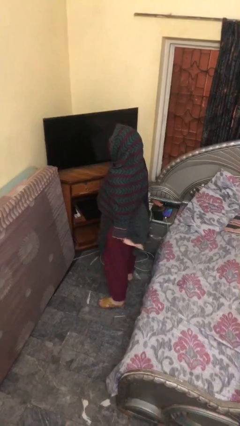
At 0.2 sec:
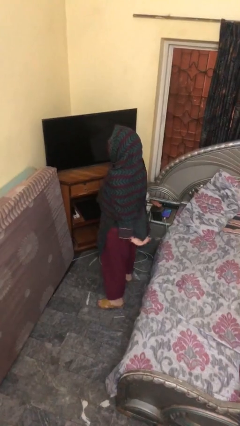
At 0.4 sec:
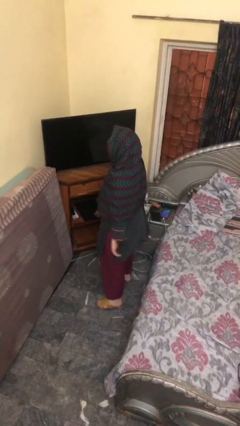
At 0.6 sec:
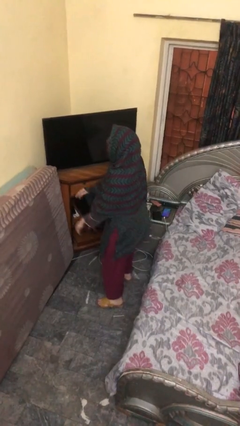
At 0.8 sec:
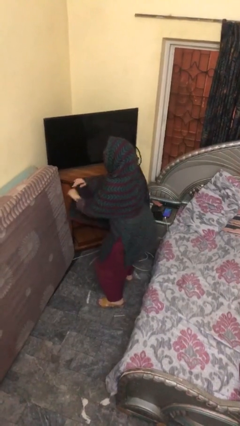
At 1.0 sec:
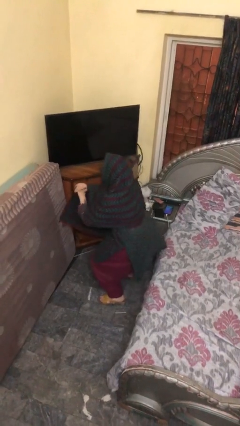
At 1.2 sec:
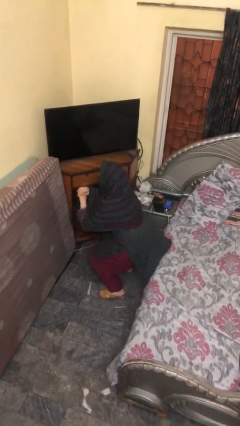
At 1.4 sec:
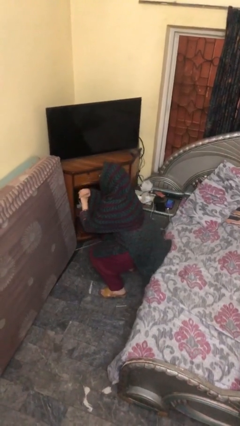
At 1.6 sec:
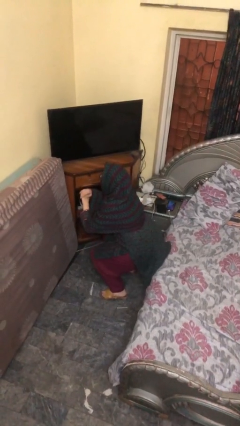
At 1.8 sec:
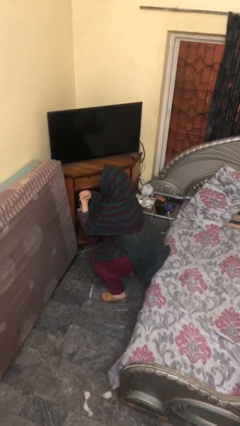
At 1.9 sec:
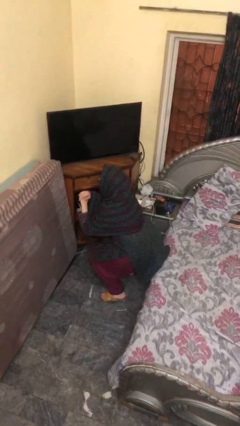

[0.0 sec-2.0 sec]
person squats

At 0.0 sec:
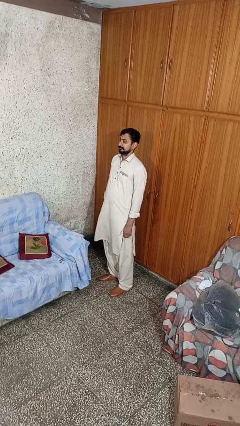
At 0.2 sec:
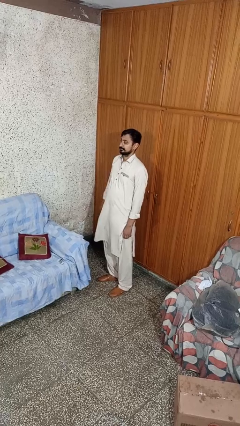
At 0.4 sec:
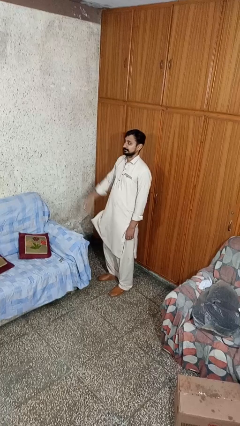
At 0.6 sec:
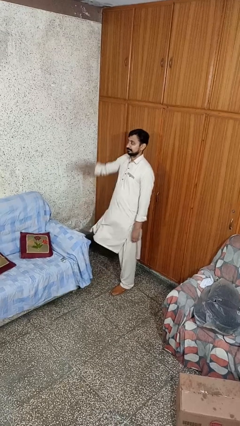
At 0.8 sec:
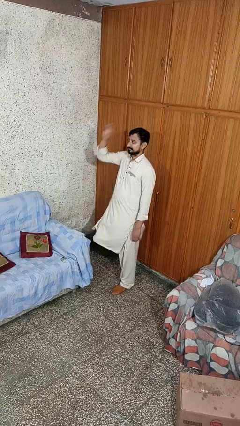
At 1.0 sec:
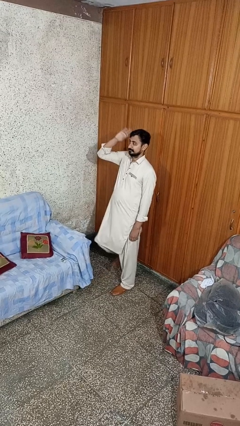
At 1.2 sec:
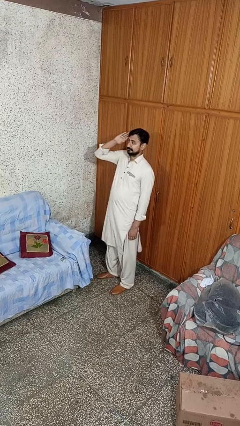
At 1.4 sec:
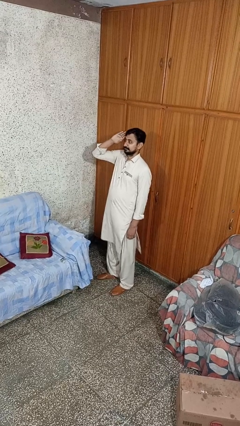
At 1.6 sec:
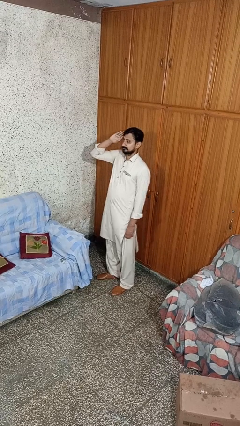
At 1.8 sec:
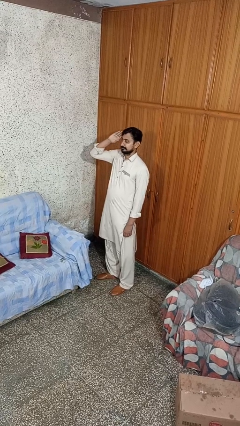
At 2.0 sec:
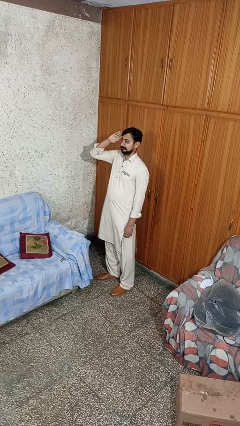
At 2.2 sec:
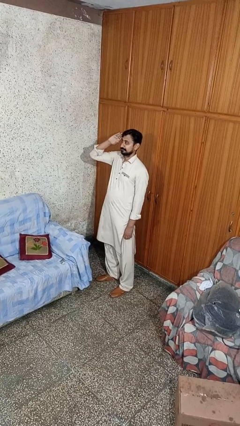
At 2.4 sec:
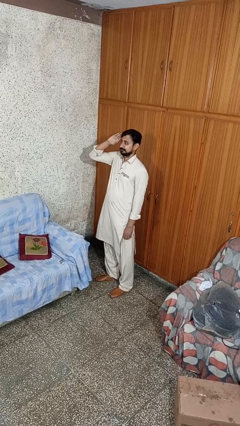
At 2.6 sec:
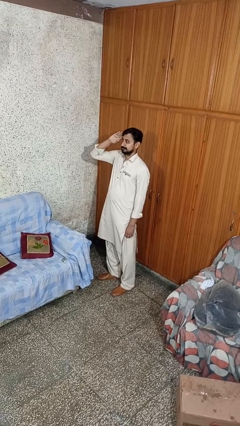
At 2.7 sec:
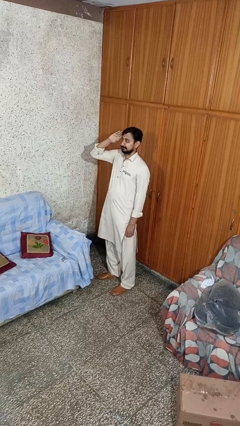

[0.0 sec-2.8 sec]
person salutes

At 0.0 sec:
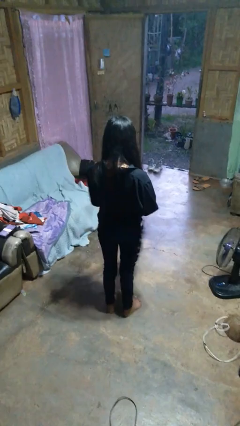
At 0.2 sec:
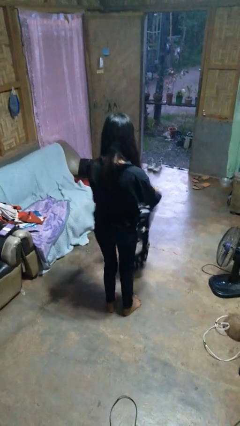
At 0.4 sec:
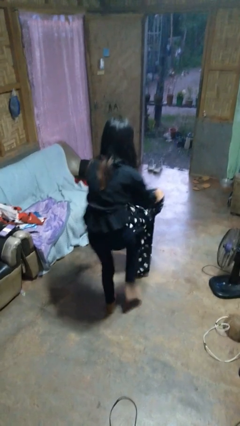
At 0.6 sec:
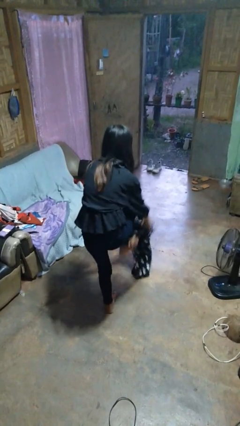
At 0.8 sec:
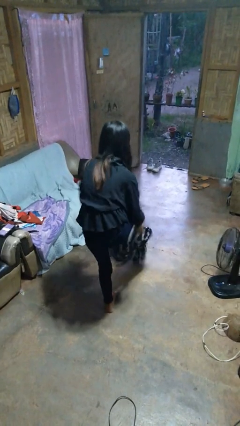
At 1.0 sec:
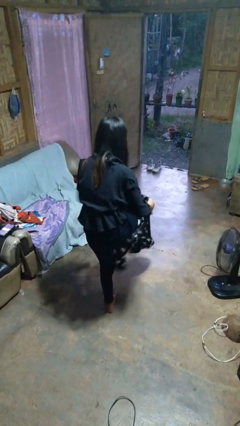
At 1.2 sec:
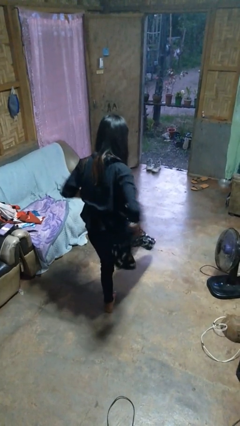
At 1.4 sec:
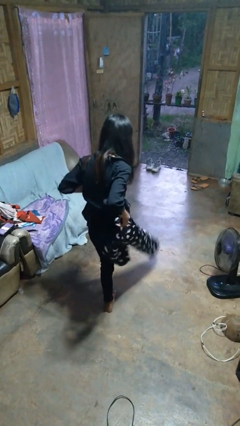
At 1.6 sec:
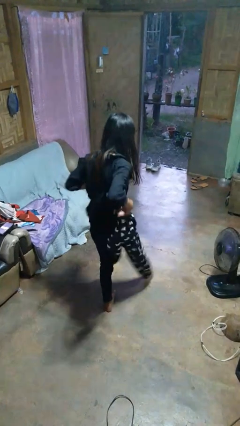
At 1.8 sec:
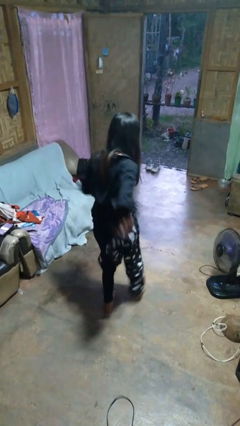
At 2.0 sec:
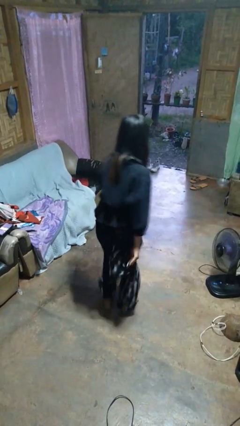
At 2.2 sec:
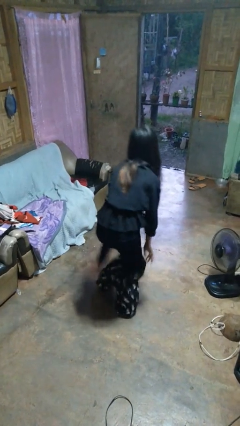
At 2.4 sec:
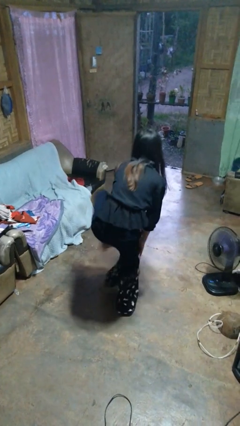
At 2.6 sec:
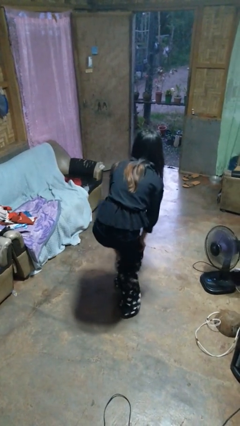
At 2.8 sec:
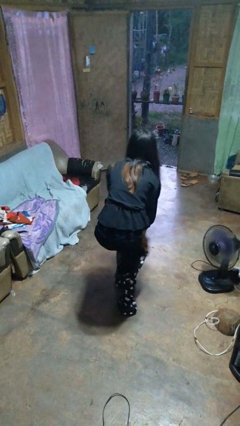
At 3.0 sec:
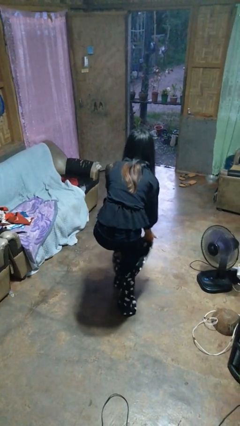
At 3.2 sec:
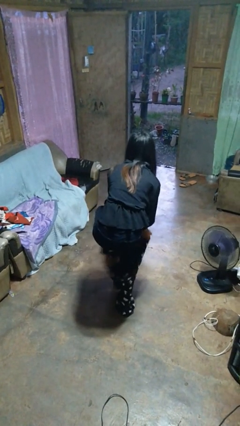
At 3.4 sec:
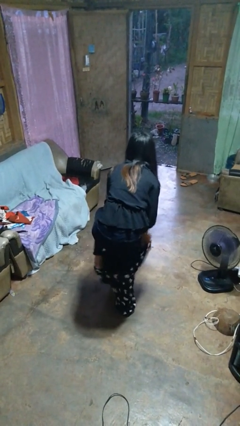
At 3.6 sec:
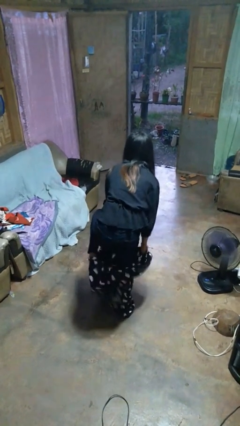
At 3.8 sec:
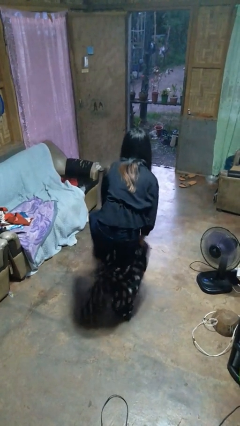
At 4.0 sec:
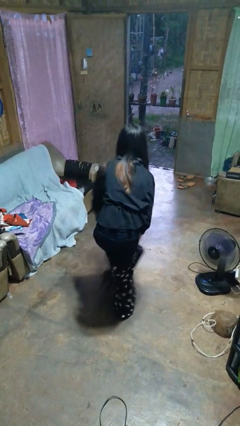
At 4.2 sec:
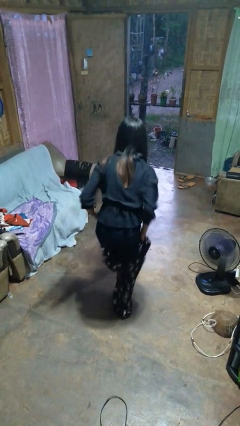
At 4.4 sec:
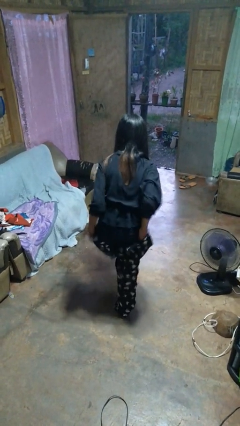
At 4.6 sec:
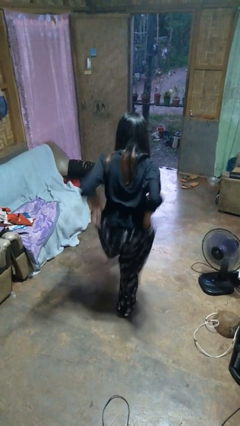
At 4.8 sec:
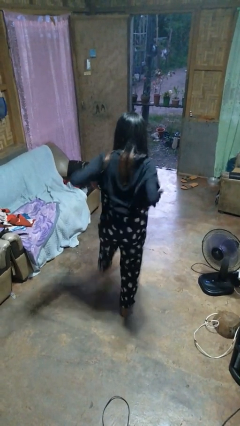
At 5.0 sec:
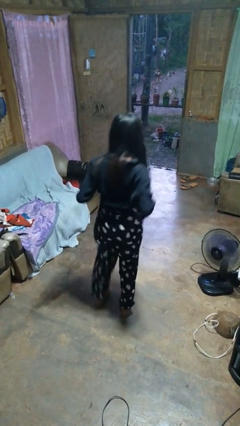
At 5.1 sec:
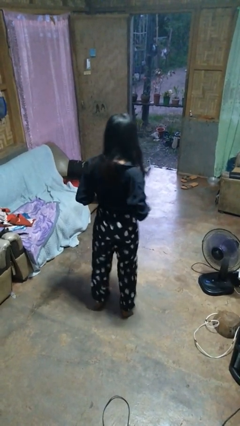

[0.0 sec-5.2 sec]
person puts on pants

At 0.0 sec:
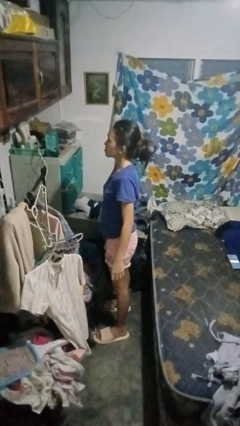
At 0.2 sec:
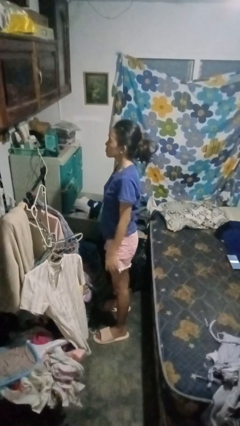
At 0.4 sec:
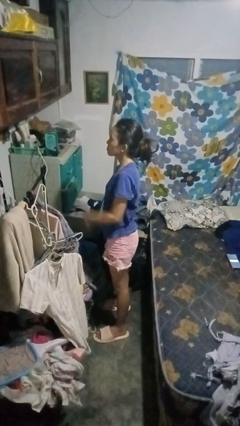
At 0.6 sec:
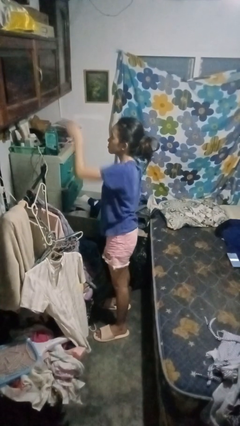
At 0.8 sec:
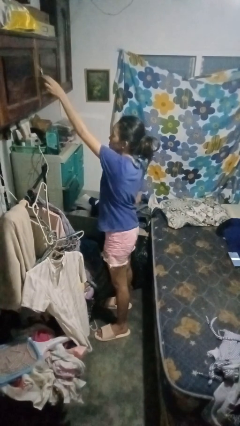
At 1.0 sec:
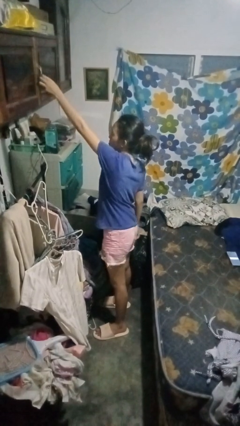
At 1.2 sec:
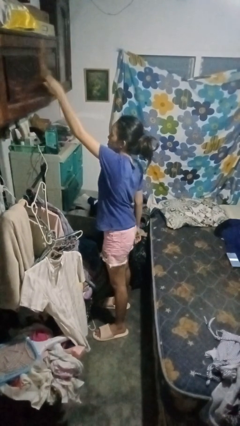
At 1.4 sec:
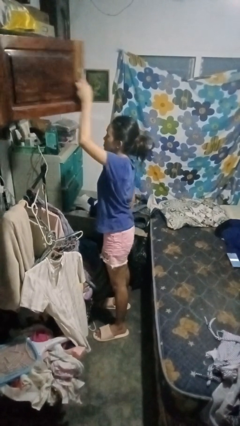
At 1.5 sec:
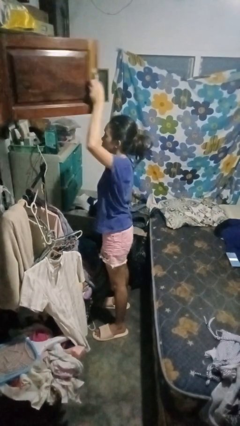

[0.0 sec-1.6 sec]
person opens closet door

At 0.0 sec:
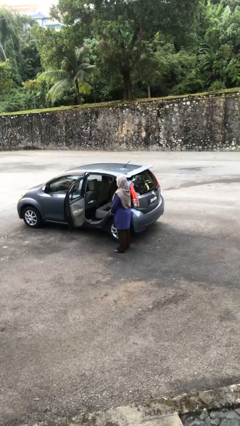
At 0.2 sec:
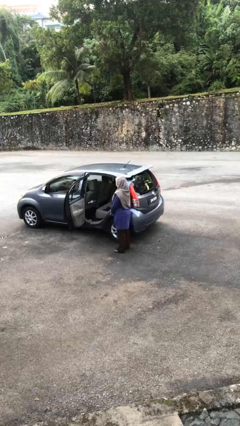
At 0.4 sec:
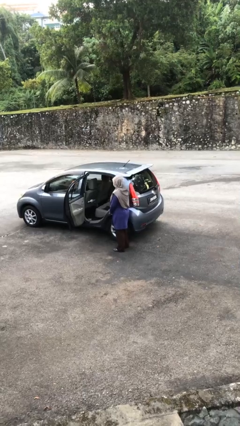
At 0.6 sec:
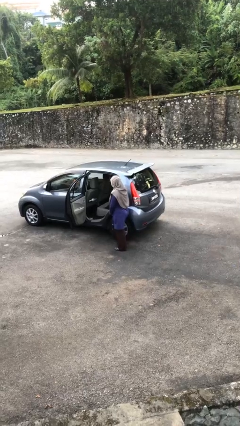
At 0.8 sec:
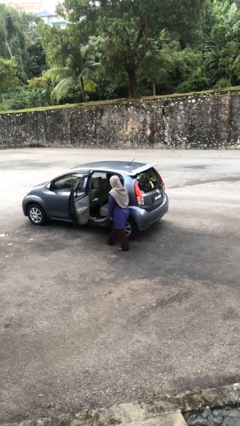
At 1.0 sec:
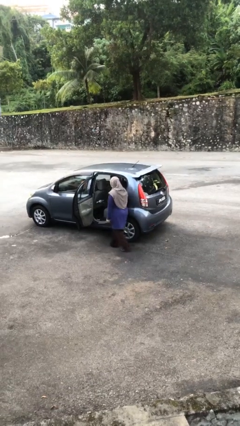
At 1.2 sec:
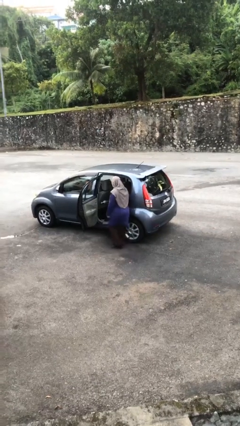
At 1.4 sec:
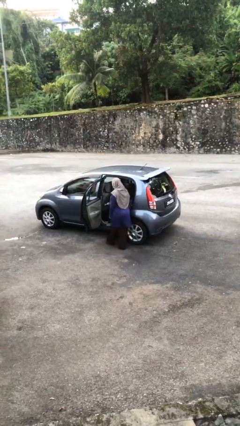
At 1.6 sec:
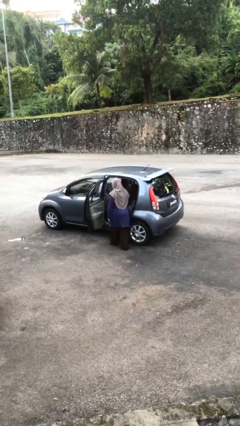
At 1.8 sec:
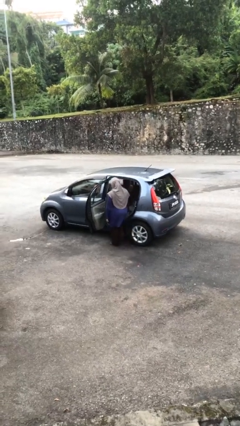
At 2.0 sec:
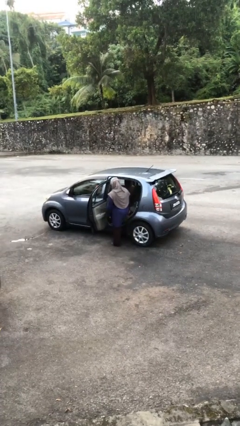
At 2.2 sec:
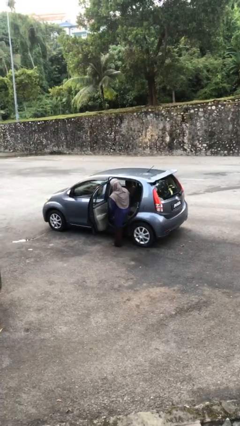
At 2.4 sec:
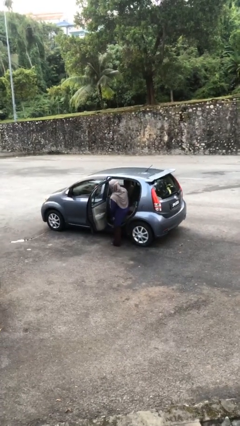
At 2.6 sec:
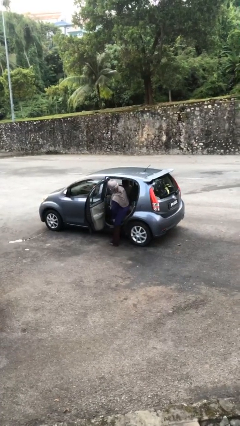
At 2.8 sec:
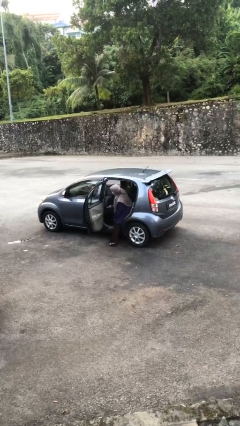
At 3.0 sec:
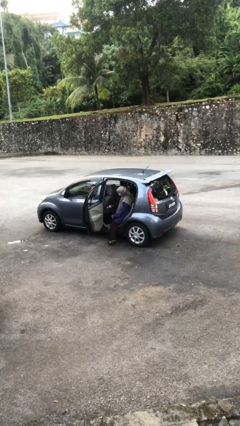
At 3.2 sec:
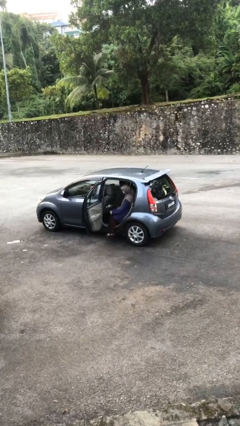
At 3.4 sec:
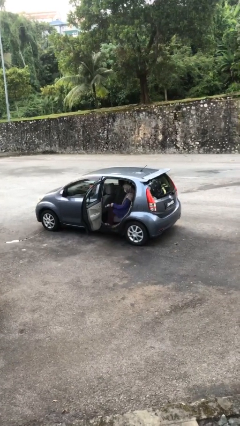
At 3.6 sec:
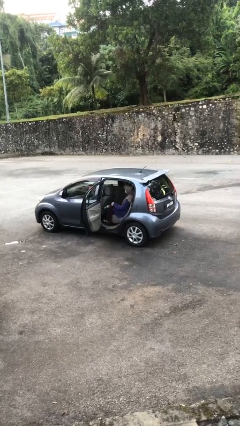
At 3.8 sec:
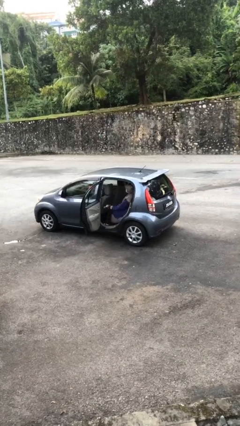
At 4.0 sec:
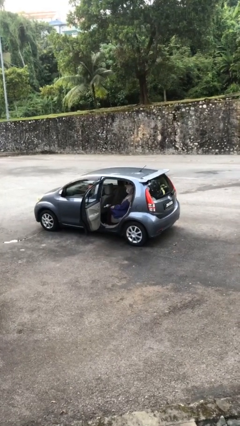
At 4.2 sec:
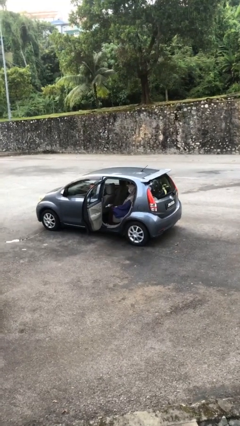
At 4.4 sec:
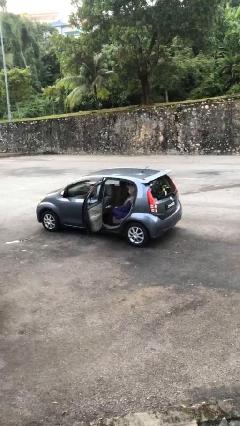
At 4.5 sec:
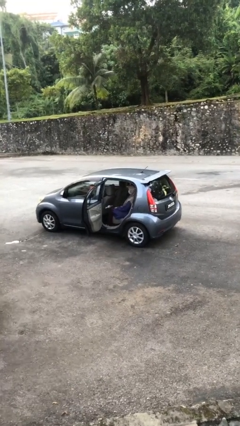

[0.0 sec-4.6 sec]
person enters car

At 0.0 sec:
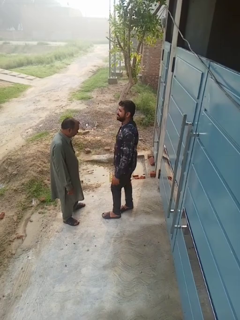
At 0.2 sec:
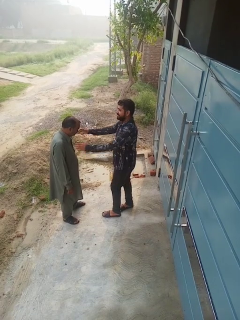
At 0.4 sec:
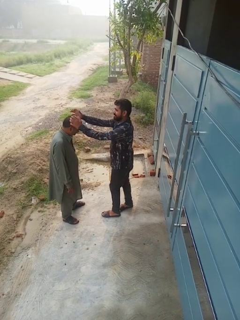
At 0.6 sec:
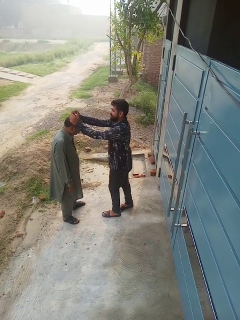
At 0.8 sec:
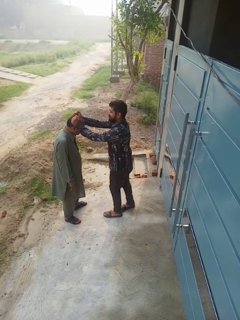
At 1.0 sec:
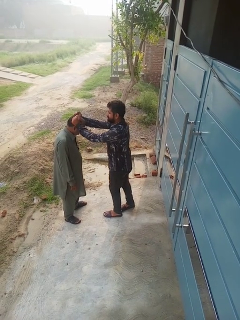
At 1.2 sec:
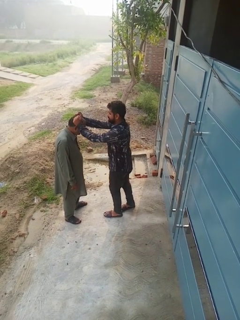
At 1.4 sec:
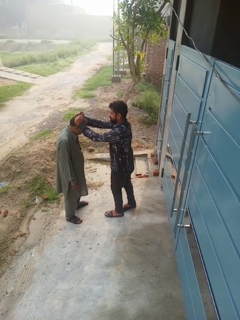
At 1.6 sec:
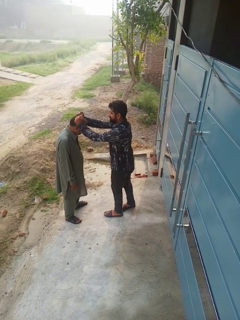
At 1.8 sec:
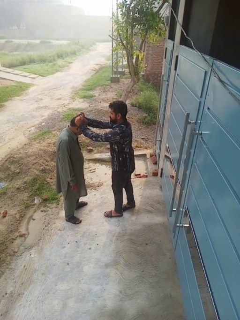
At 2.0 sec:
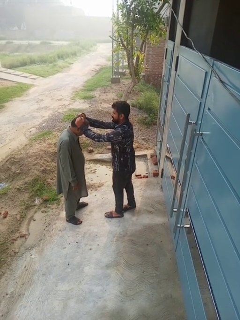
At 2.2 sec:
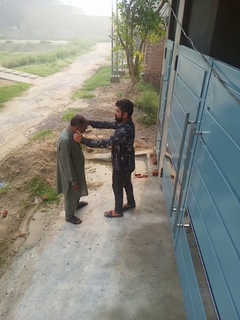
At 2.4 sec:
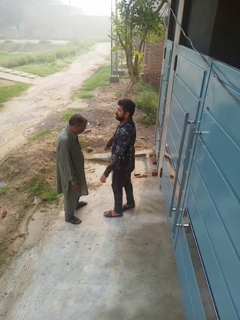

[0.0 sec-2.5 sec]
person grabs person by hair
